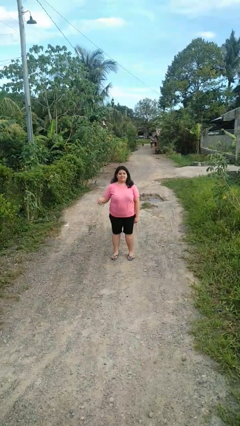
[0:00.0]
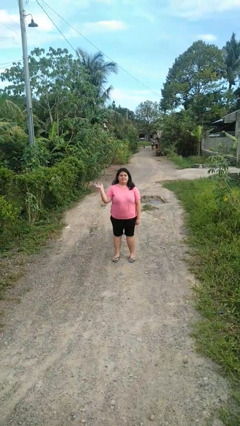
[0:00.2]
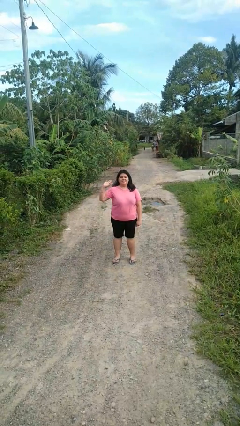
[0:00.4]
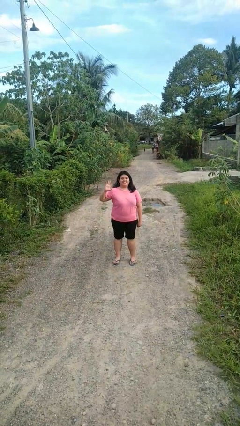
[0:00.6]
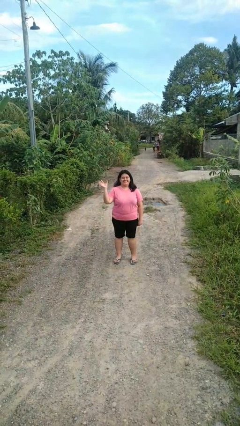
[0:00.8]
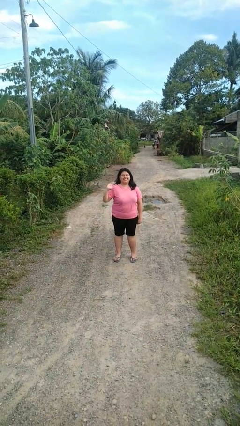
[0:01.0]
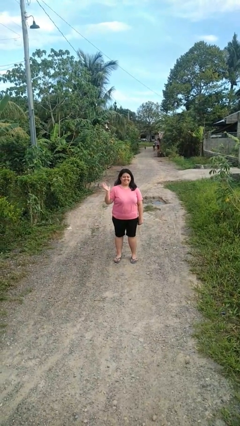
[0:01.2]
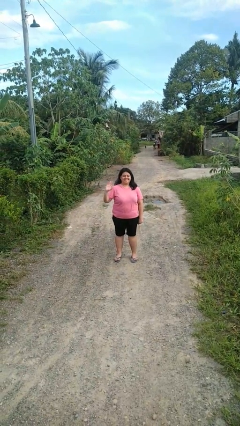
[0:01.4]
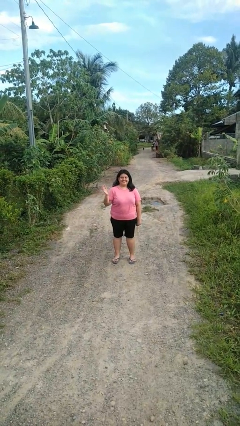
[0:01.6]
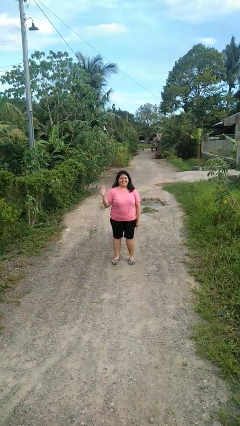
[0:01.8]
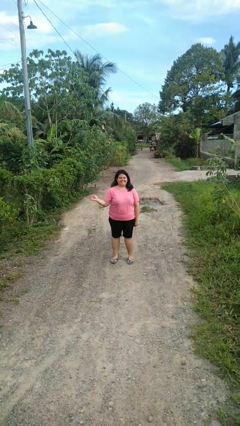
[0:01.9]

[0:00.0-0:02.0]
person waves at person

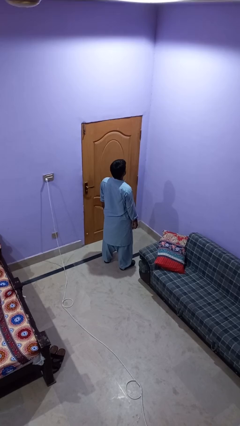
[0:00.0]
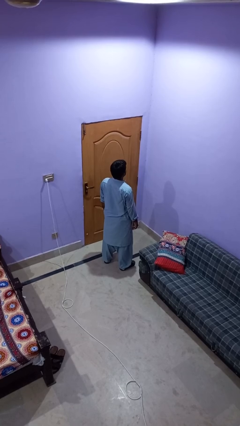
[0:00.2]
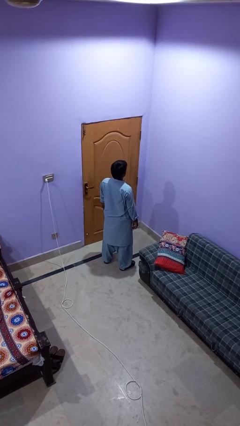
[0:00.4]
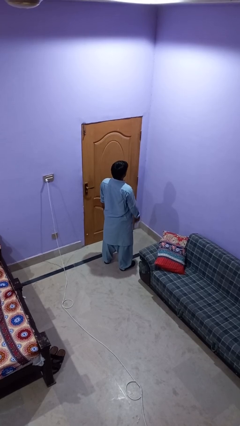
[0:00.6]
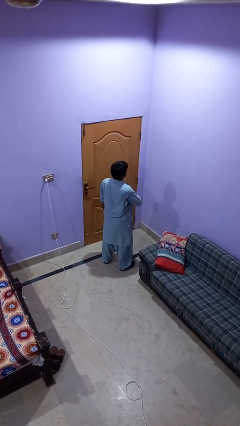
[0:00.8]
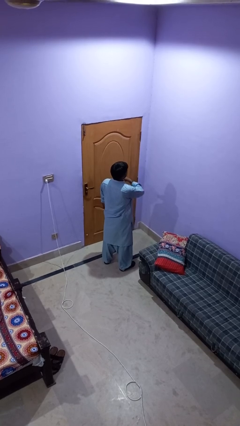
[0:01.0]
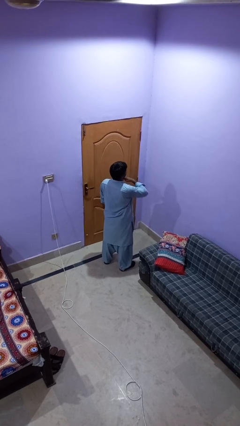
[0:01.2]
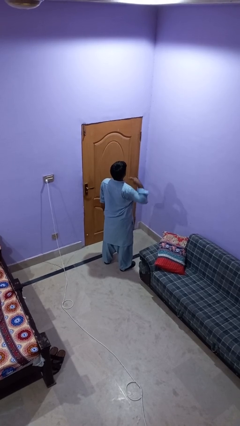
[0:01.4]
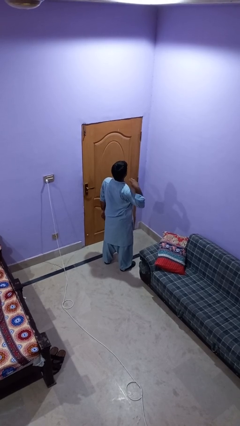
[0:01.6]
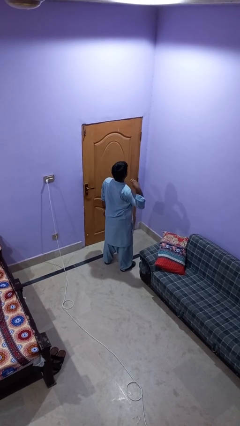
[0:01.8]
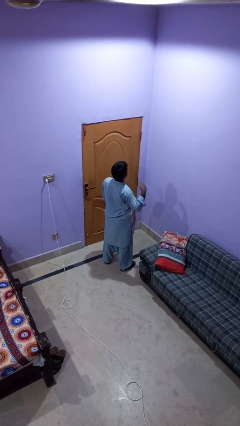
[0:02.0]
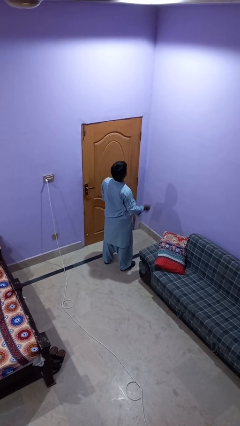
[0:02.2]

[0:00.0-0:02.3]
person gestures cut

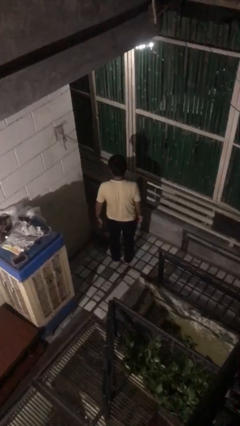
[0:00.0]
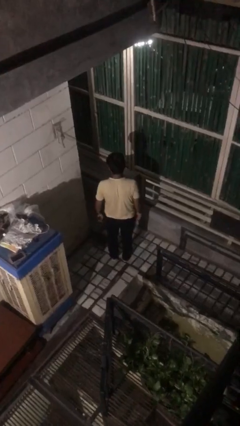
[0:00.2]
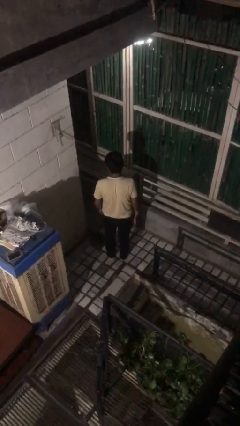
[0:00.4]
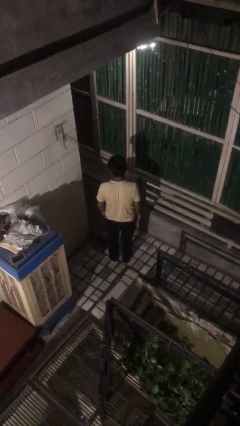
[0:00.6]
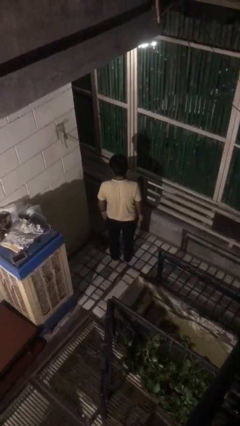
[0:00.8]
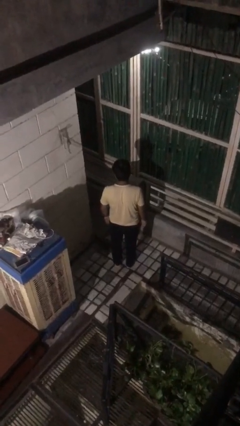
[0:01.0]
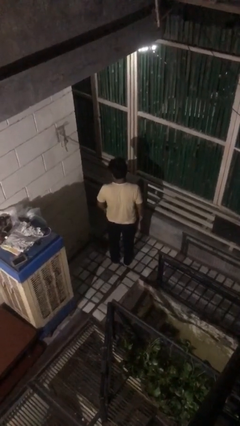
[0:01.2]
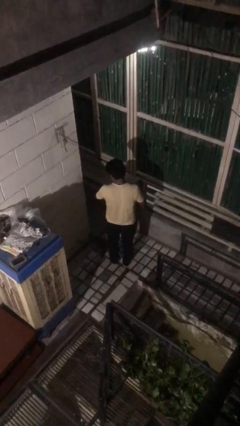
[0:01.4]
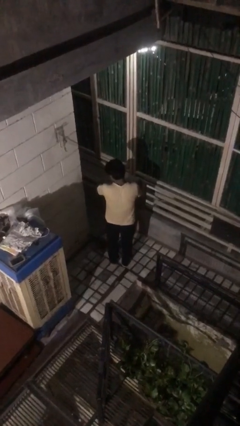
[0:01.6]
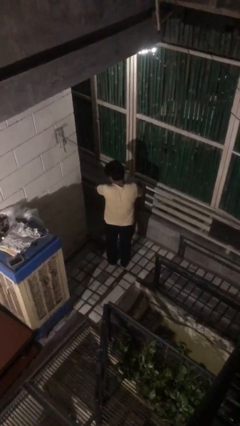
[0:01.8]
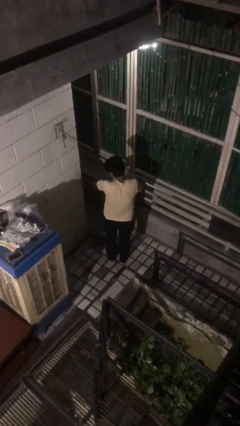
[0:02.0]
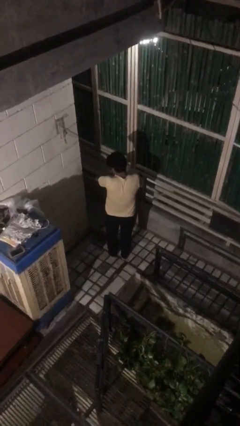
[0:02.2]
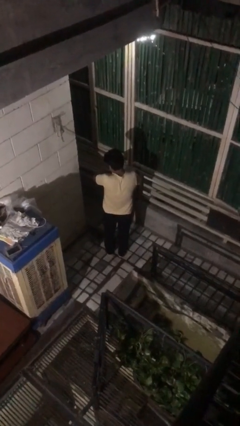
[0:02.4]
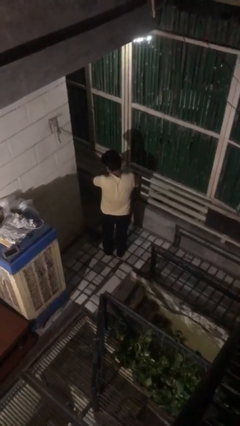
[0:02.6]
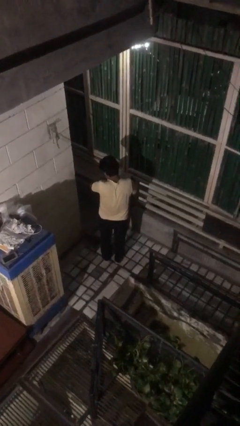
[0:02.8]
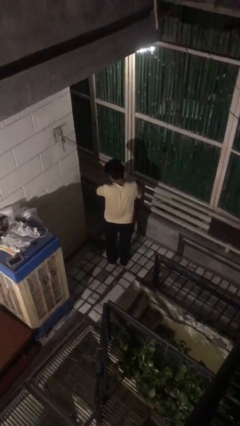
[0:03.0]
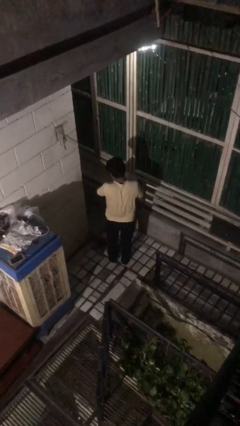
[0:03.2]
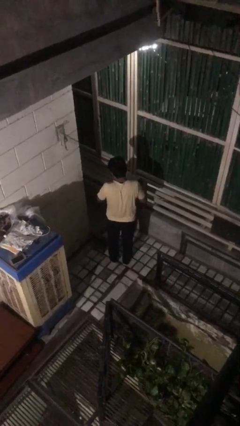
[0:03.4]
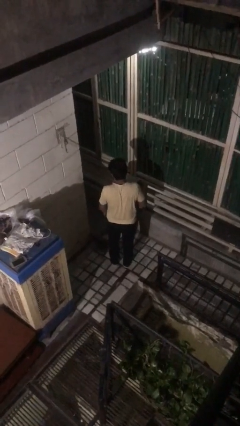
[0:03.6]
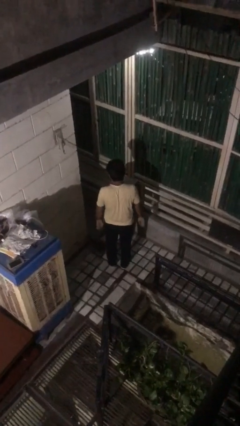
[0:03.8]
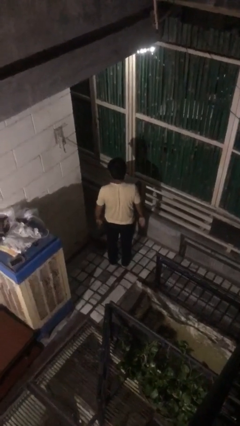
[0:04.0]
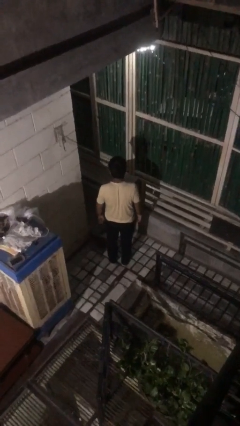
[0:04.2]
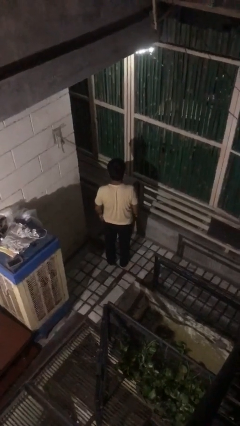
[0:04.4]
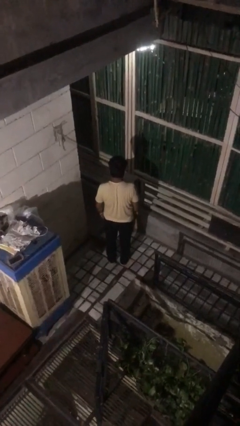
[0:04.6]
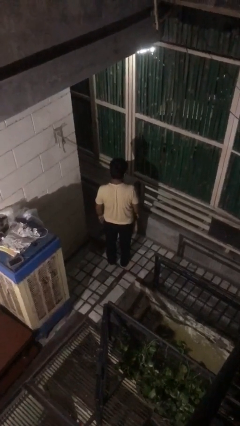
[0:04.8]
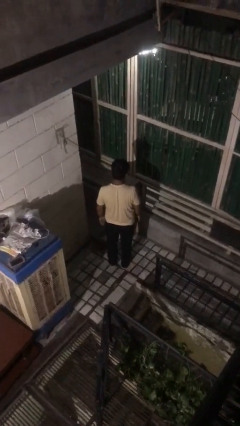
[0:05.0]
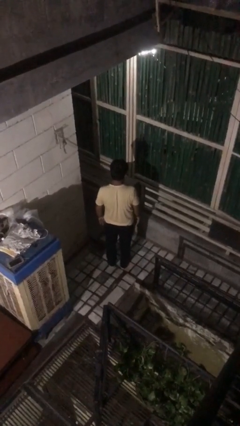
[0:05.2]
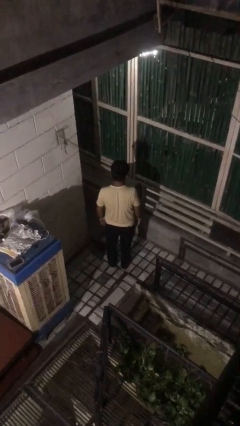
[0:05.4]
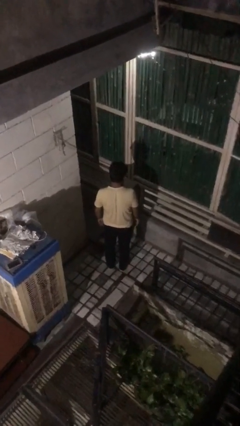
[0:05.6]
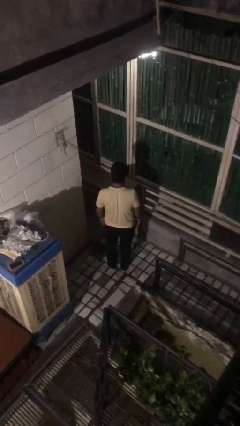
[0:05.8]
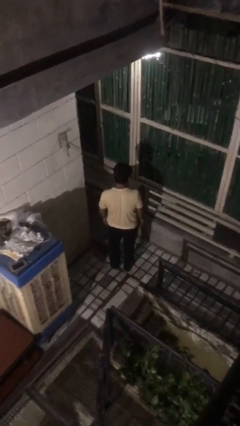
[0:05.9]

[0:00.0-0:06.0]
person swats bug

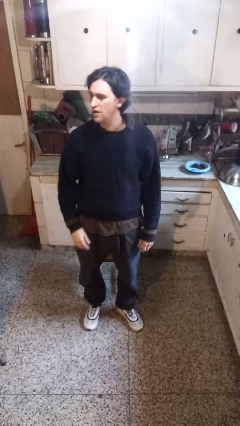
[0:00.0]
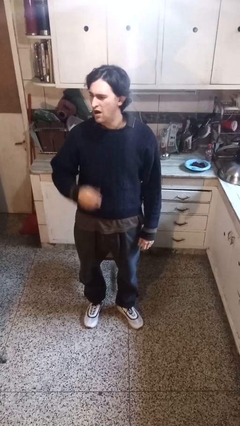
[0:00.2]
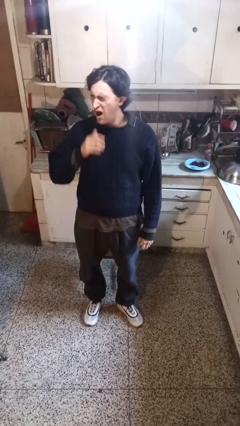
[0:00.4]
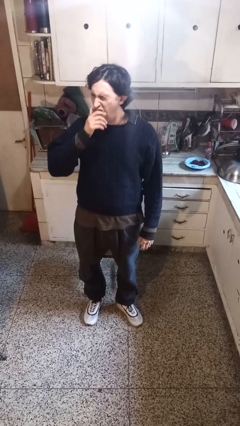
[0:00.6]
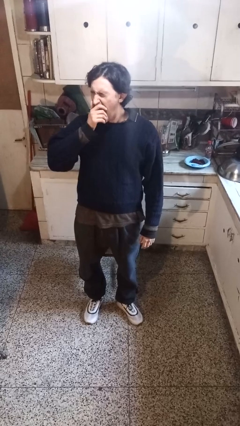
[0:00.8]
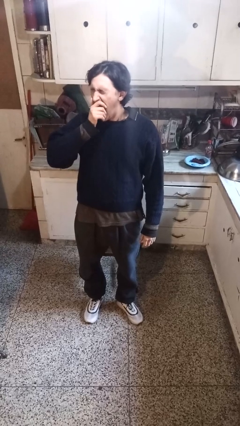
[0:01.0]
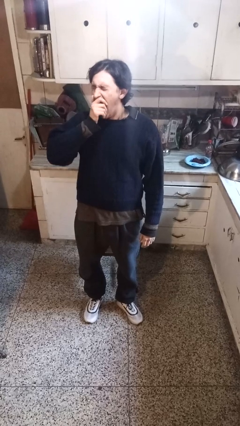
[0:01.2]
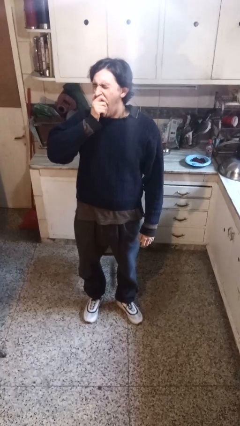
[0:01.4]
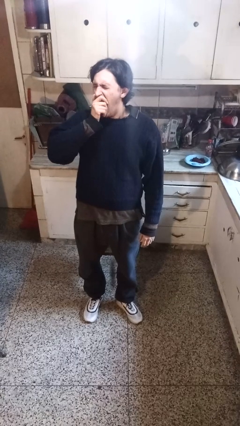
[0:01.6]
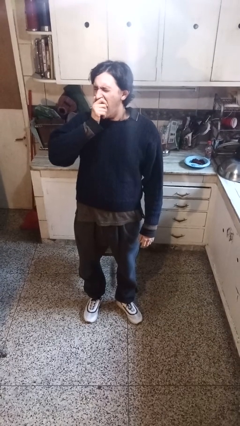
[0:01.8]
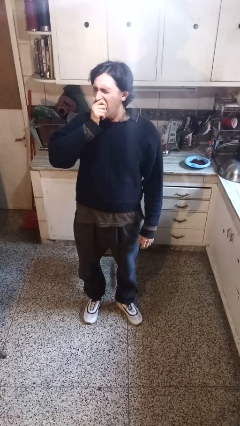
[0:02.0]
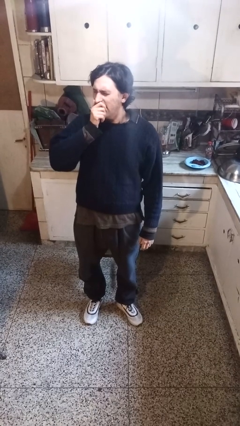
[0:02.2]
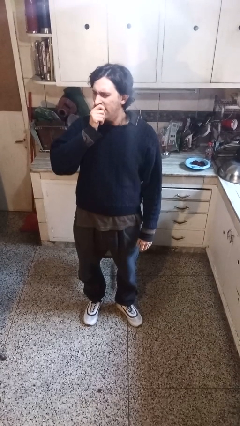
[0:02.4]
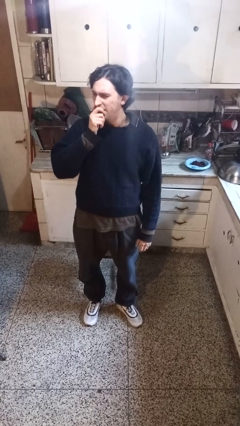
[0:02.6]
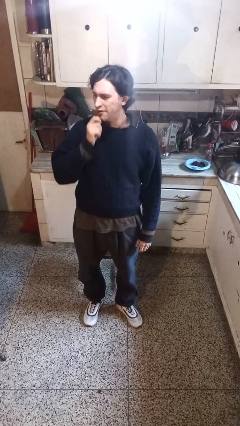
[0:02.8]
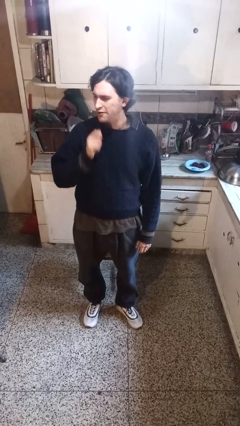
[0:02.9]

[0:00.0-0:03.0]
person yawns

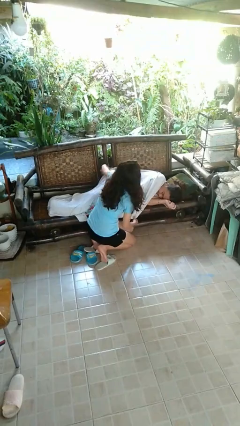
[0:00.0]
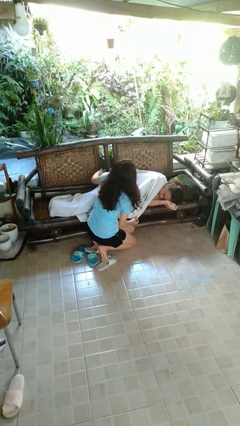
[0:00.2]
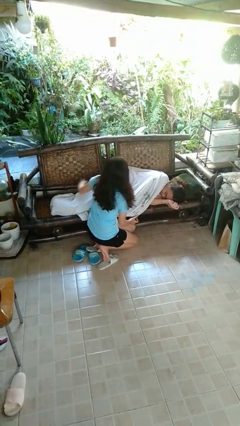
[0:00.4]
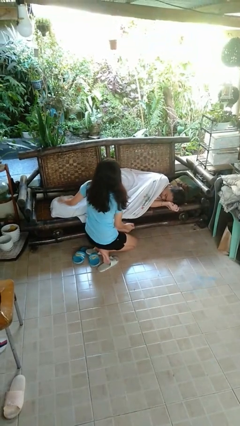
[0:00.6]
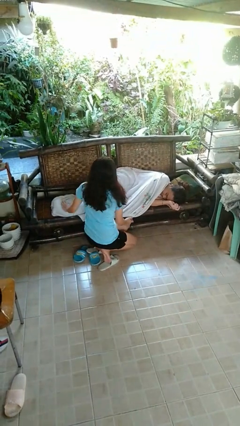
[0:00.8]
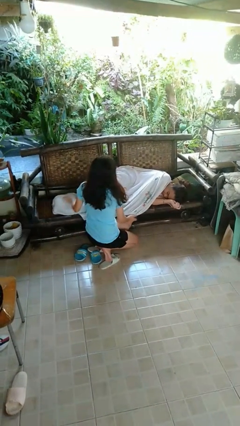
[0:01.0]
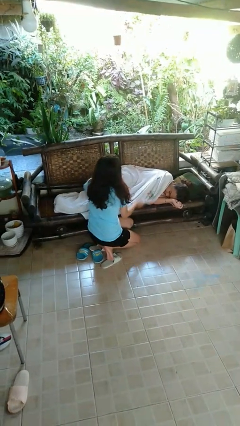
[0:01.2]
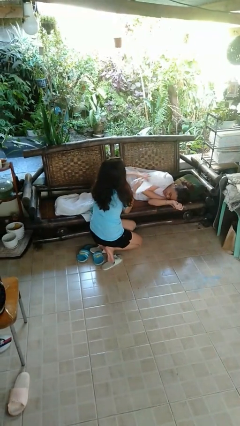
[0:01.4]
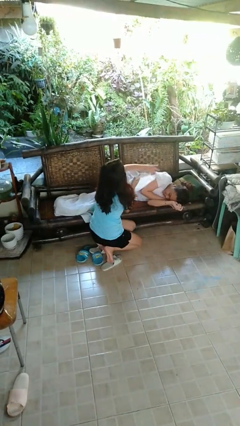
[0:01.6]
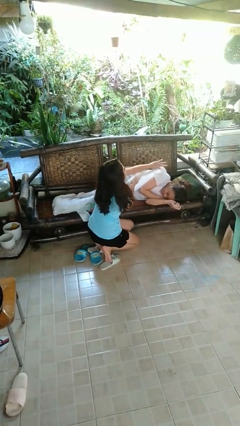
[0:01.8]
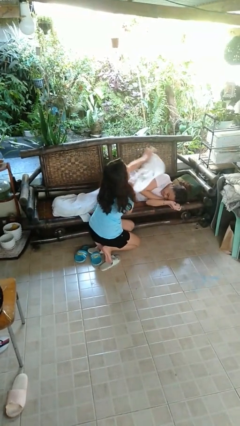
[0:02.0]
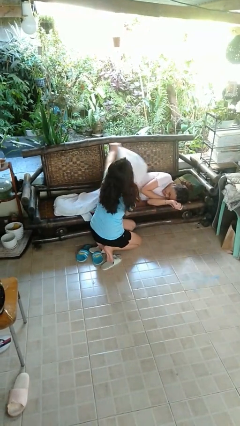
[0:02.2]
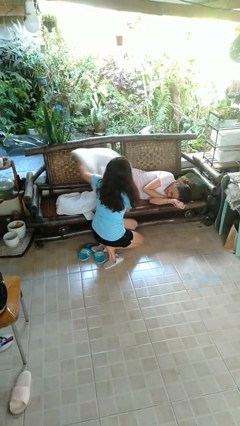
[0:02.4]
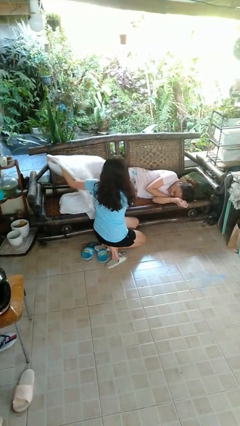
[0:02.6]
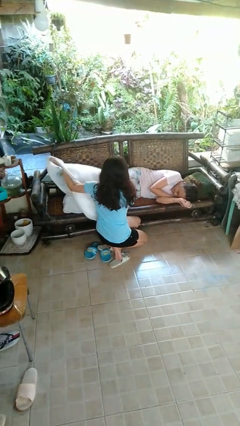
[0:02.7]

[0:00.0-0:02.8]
person uncovers friend with blanket

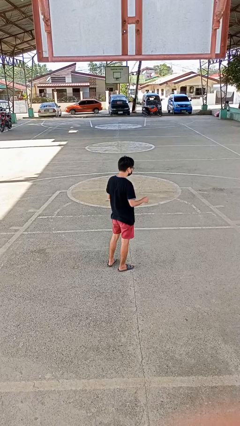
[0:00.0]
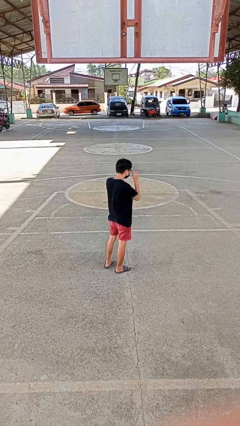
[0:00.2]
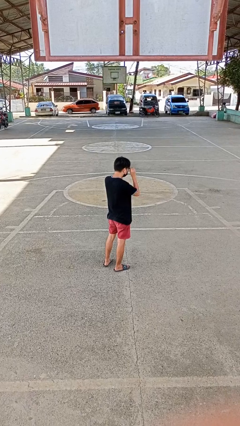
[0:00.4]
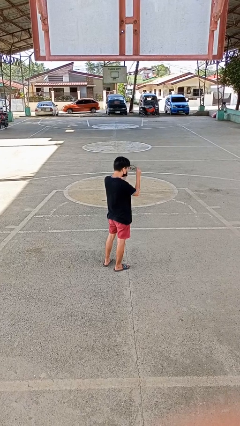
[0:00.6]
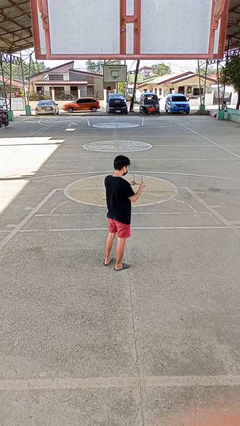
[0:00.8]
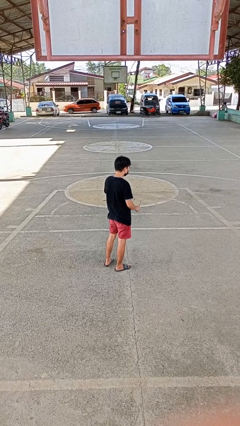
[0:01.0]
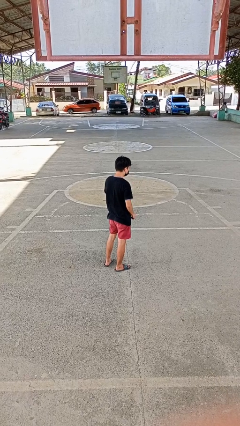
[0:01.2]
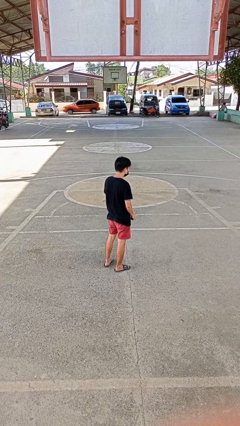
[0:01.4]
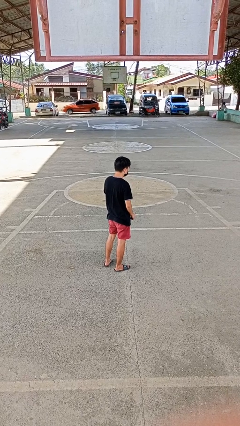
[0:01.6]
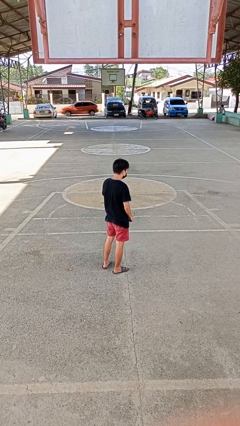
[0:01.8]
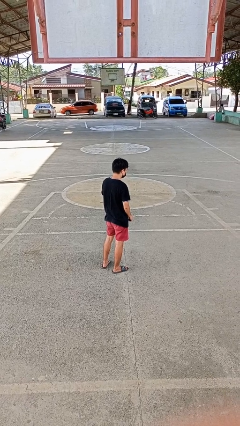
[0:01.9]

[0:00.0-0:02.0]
person takes off glasses
